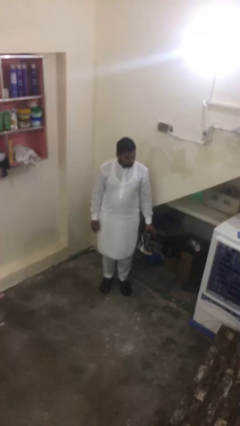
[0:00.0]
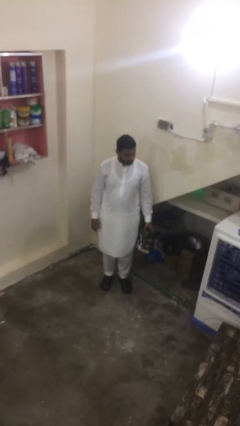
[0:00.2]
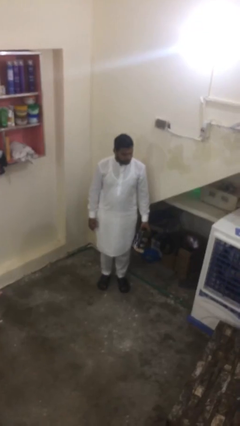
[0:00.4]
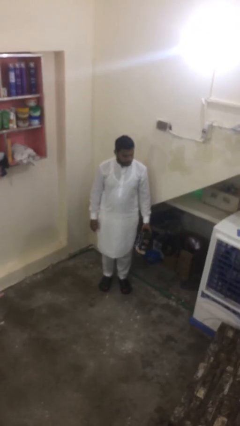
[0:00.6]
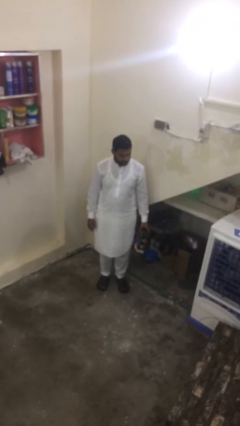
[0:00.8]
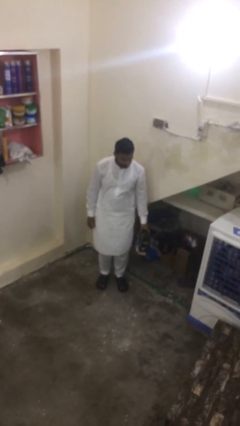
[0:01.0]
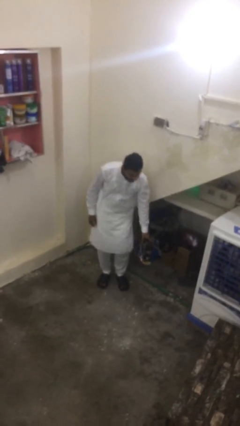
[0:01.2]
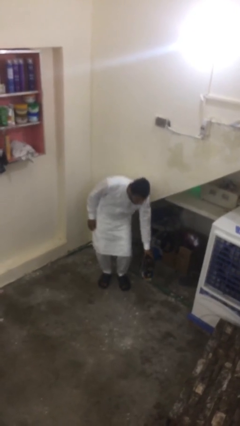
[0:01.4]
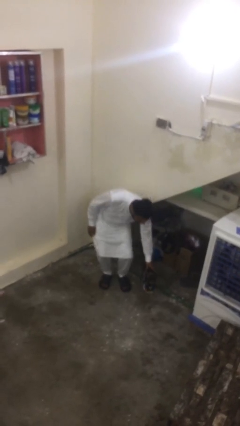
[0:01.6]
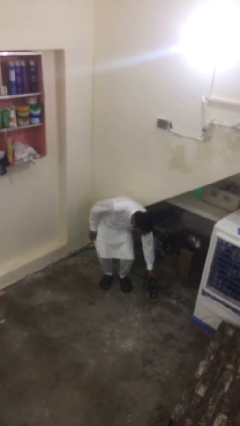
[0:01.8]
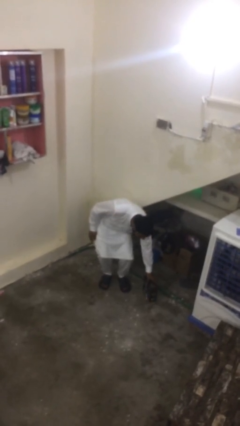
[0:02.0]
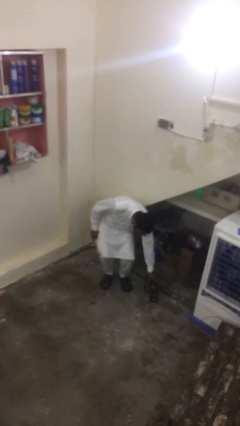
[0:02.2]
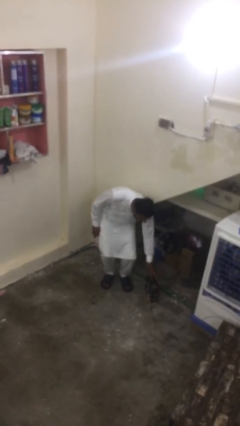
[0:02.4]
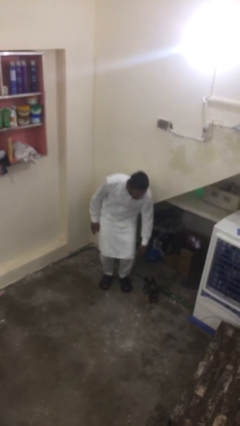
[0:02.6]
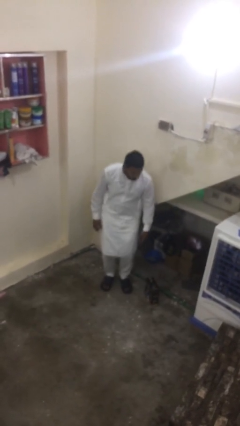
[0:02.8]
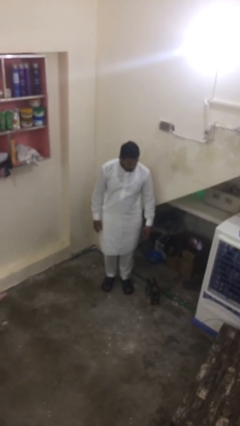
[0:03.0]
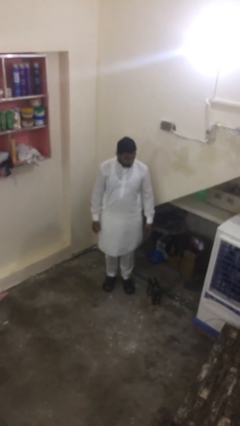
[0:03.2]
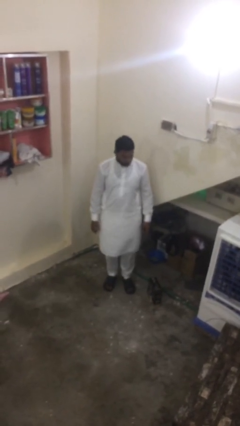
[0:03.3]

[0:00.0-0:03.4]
person puts down object on floor

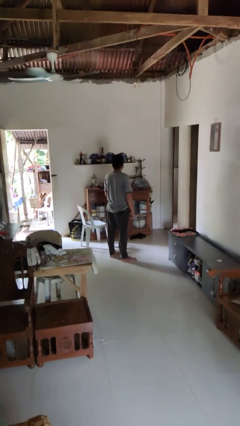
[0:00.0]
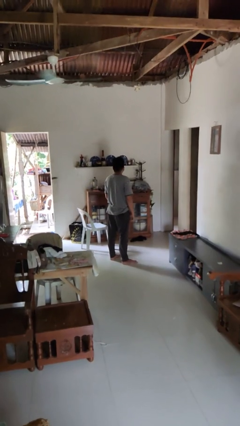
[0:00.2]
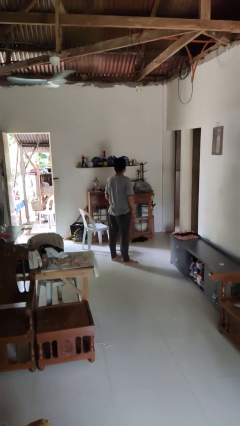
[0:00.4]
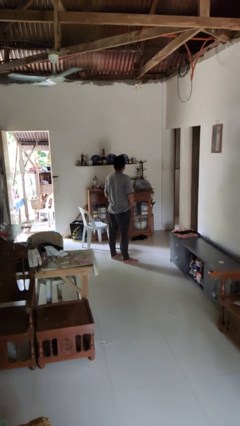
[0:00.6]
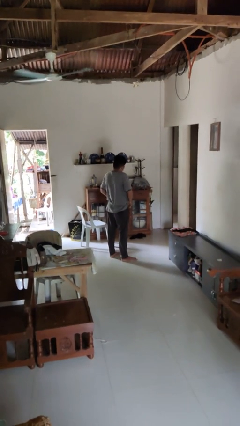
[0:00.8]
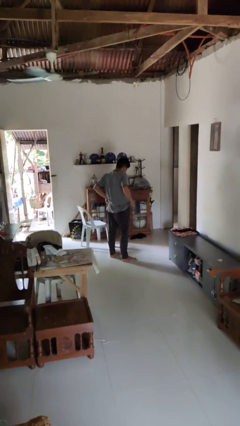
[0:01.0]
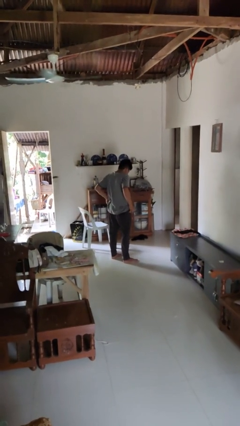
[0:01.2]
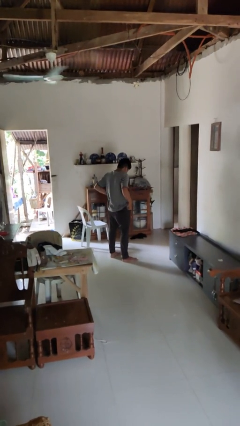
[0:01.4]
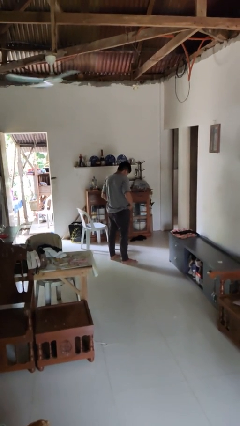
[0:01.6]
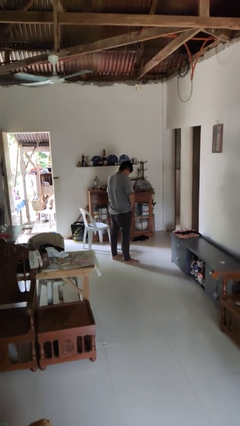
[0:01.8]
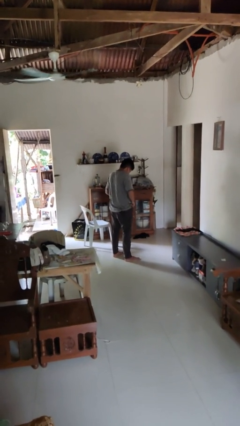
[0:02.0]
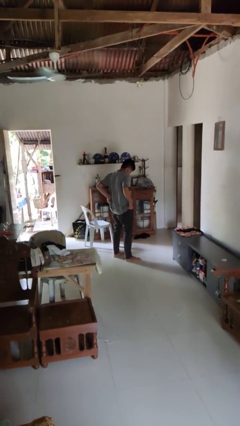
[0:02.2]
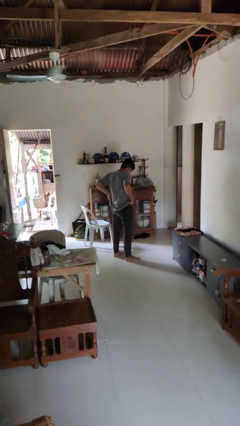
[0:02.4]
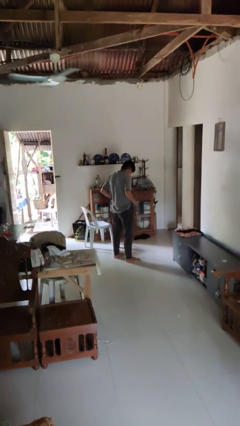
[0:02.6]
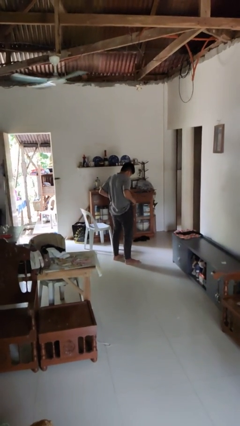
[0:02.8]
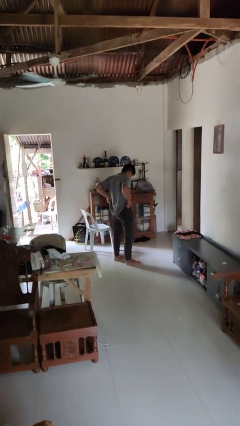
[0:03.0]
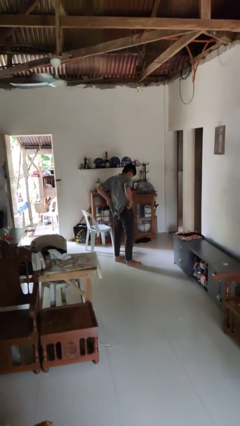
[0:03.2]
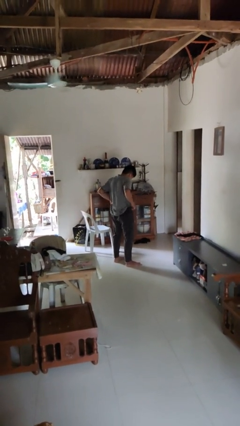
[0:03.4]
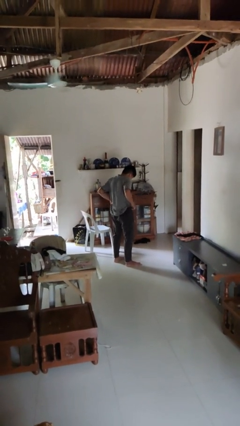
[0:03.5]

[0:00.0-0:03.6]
person hikes up pants

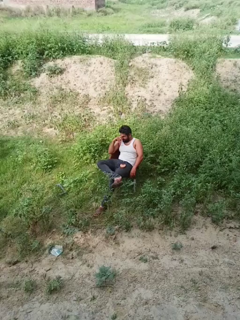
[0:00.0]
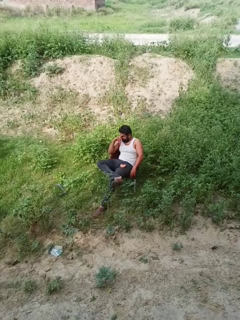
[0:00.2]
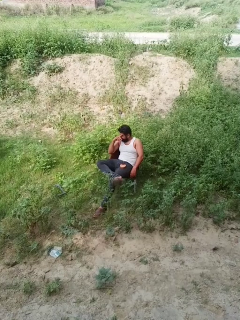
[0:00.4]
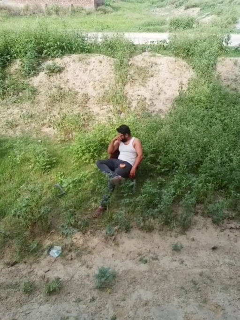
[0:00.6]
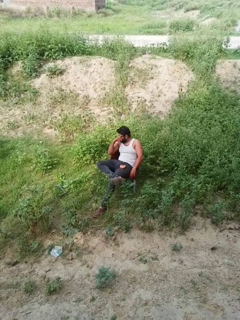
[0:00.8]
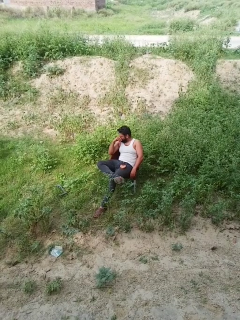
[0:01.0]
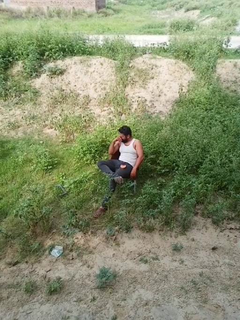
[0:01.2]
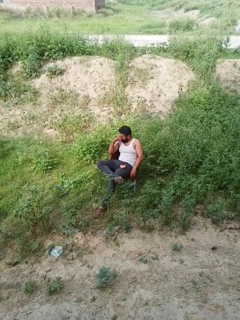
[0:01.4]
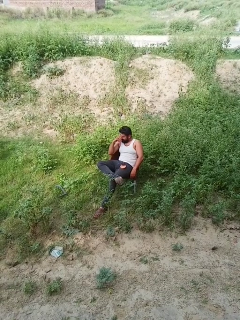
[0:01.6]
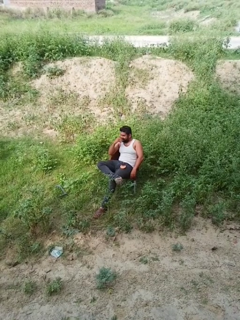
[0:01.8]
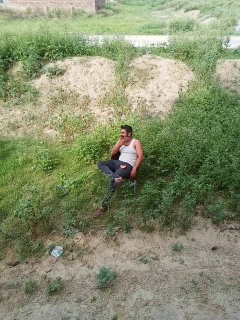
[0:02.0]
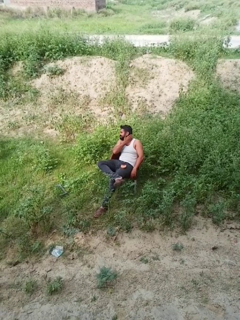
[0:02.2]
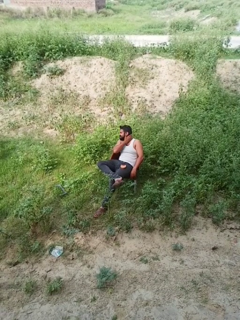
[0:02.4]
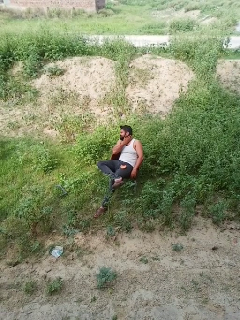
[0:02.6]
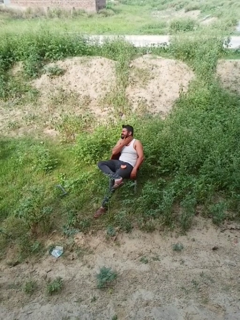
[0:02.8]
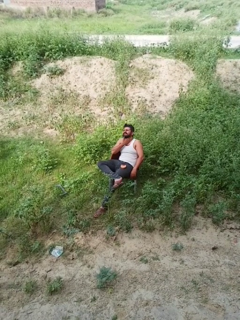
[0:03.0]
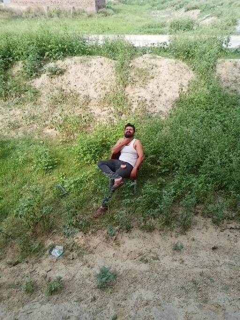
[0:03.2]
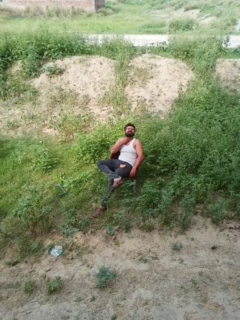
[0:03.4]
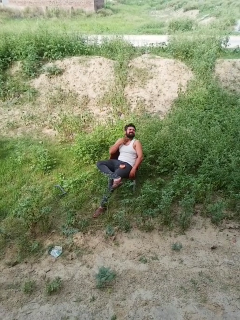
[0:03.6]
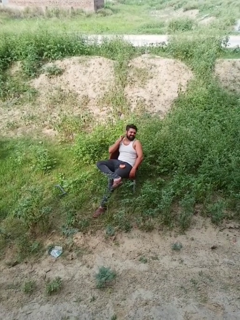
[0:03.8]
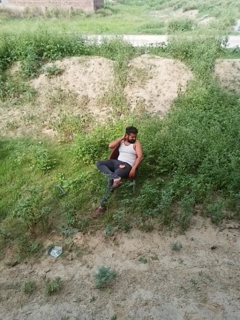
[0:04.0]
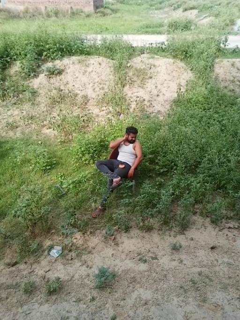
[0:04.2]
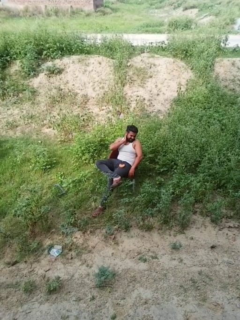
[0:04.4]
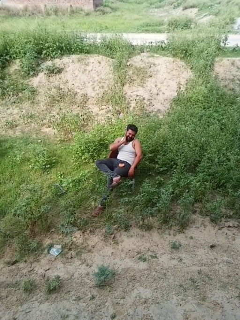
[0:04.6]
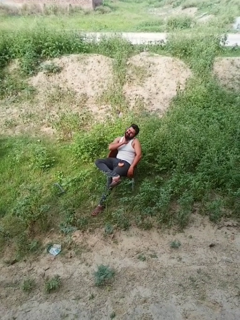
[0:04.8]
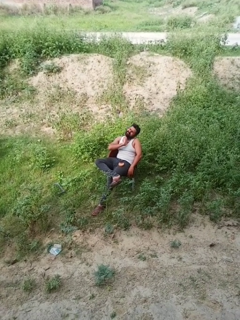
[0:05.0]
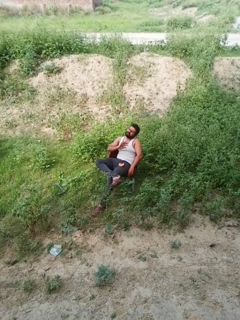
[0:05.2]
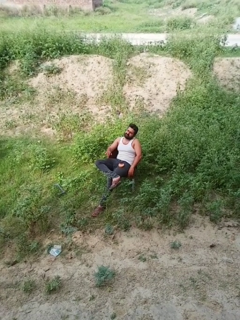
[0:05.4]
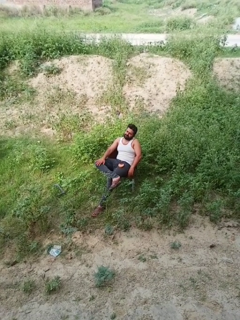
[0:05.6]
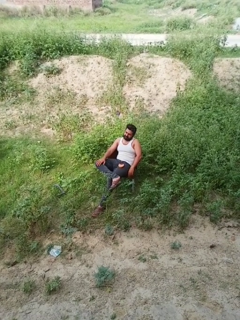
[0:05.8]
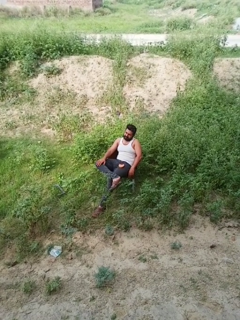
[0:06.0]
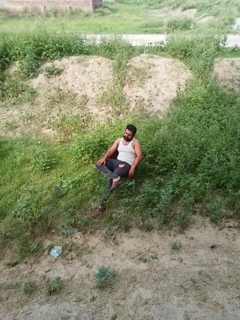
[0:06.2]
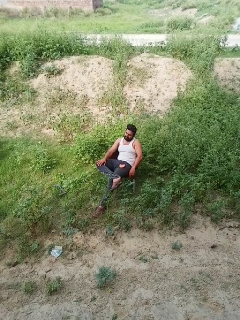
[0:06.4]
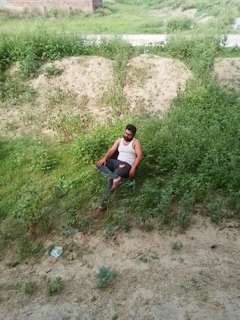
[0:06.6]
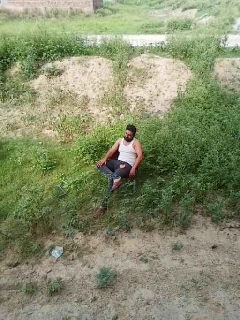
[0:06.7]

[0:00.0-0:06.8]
person rubs neck

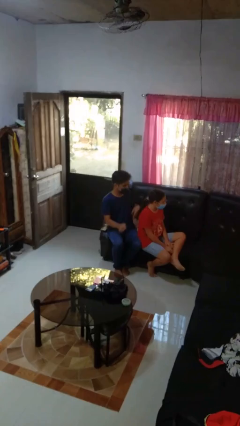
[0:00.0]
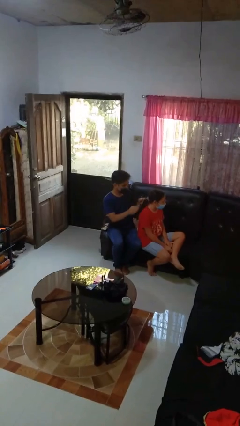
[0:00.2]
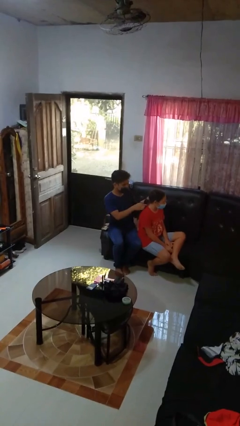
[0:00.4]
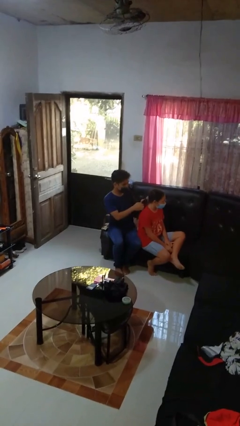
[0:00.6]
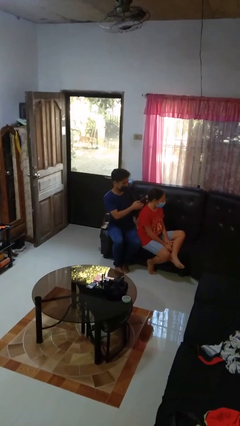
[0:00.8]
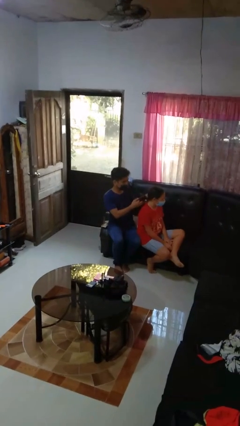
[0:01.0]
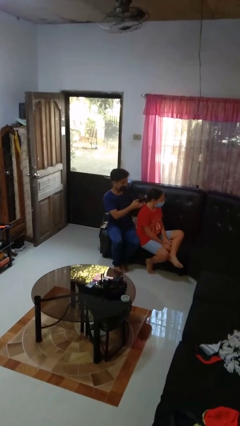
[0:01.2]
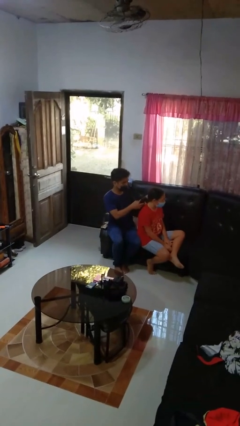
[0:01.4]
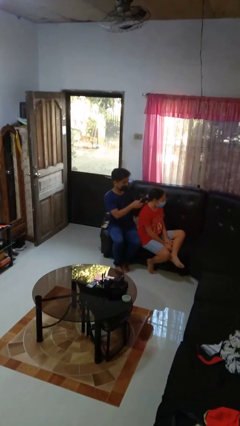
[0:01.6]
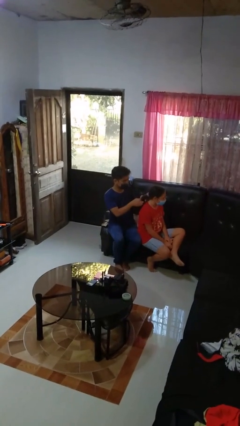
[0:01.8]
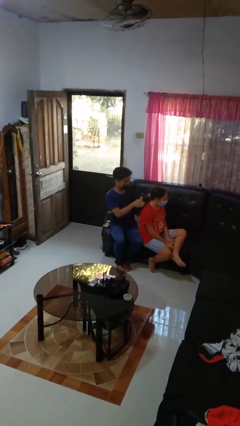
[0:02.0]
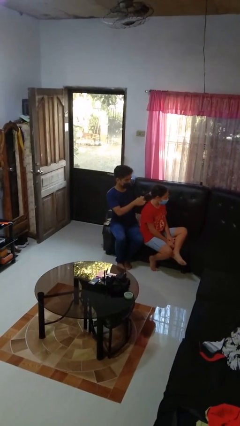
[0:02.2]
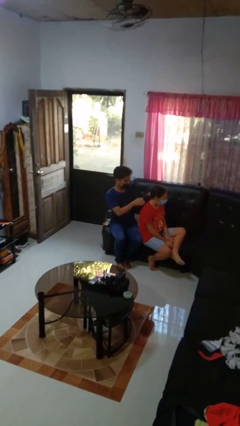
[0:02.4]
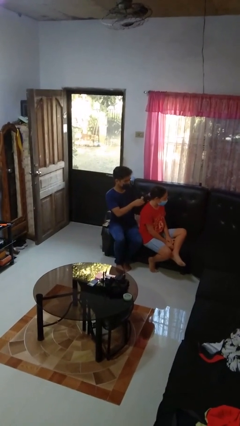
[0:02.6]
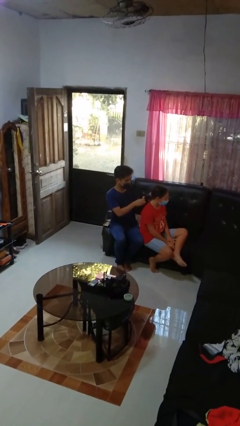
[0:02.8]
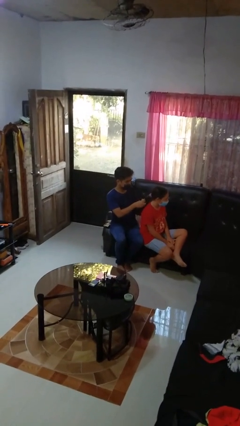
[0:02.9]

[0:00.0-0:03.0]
person braids hair of person

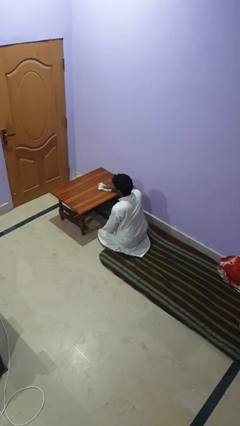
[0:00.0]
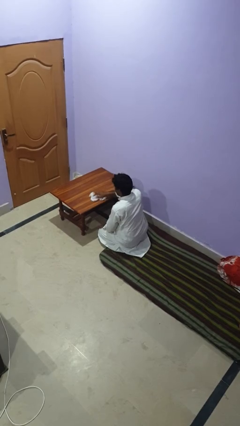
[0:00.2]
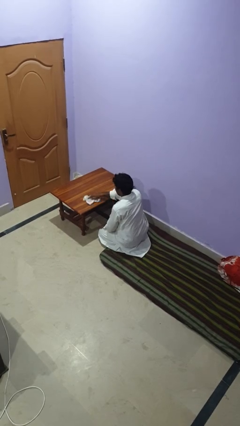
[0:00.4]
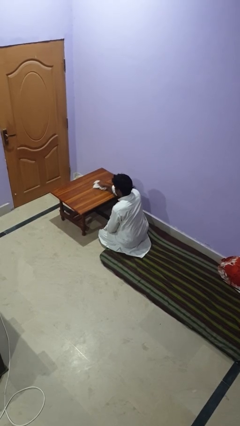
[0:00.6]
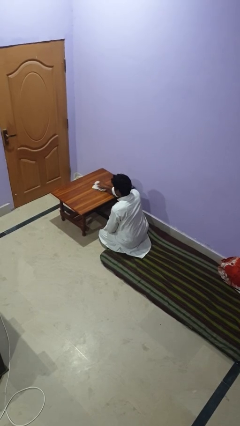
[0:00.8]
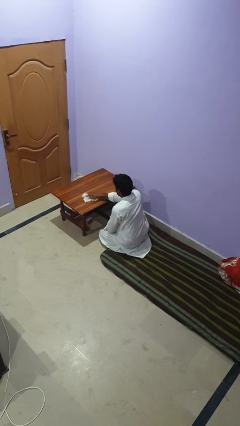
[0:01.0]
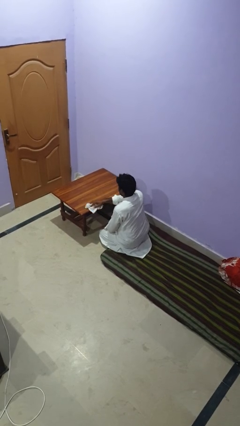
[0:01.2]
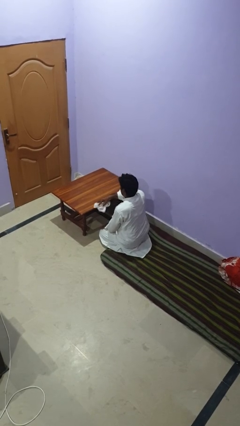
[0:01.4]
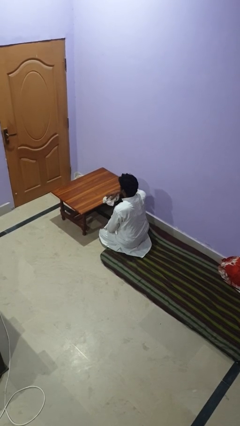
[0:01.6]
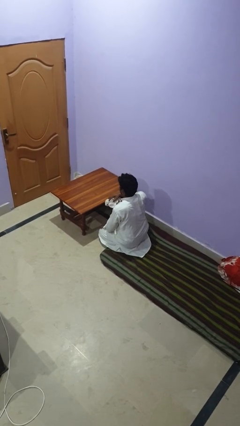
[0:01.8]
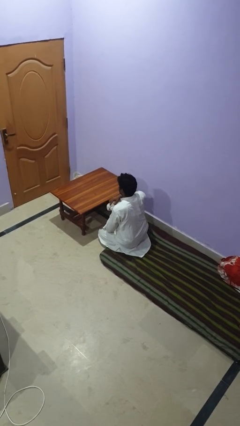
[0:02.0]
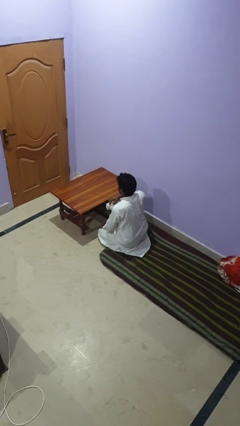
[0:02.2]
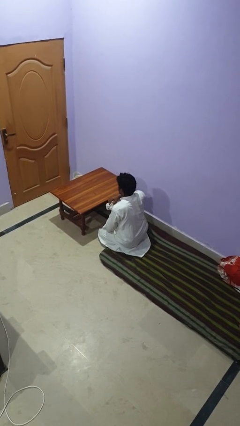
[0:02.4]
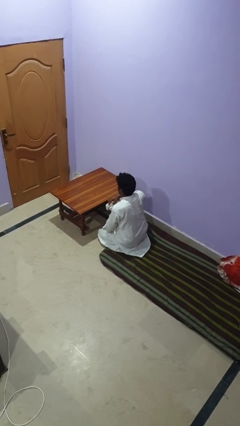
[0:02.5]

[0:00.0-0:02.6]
person cleans table with rag

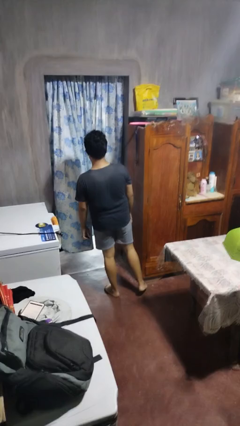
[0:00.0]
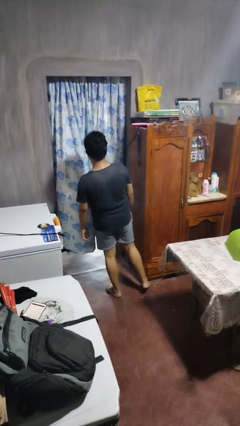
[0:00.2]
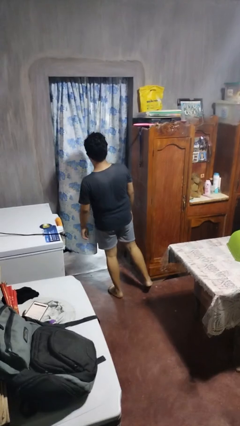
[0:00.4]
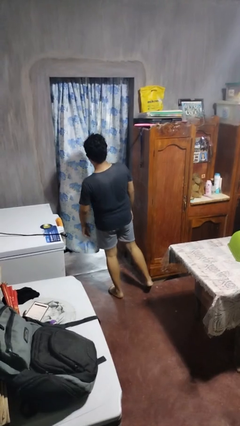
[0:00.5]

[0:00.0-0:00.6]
person stubs toe
